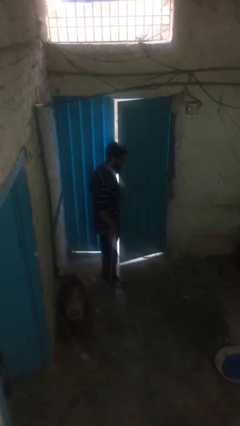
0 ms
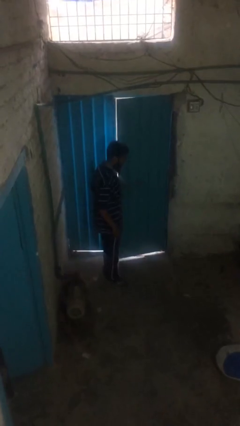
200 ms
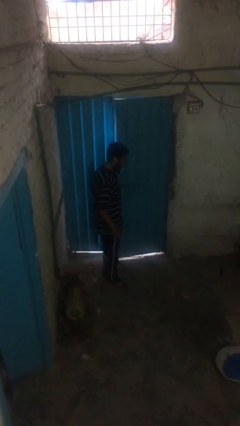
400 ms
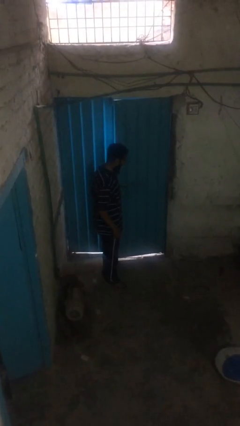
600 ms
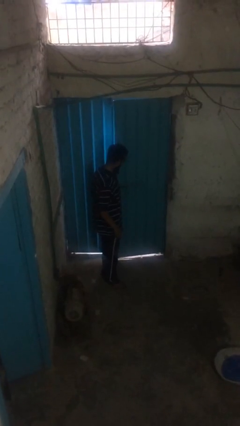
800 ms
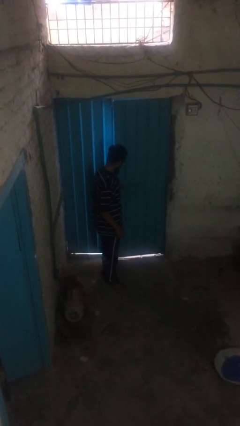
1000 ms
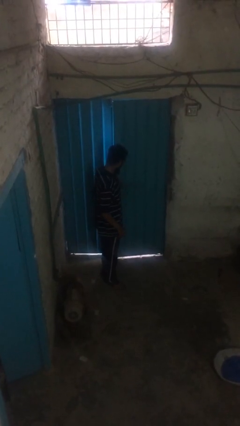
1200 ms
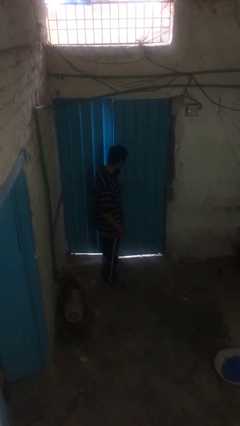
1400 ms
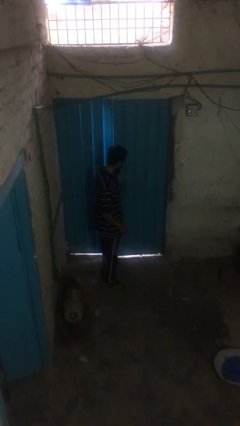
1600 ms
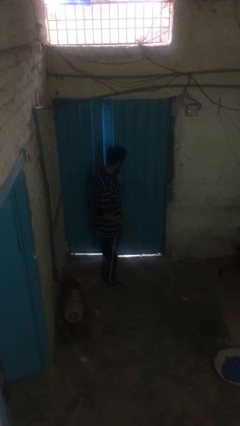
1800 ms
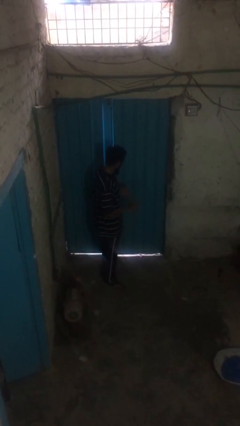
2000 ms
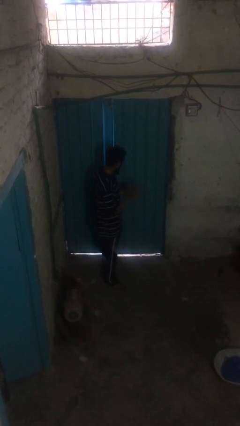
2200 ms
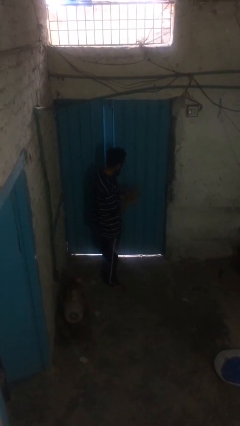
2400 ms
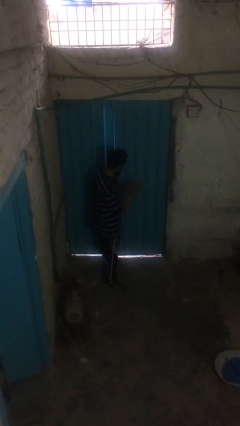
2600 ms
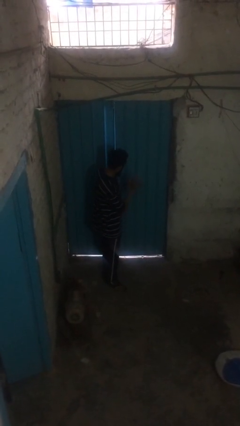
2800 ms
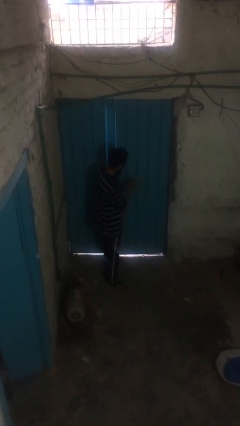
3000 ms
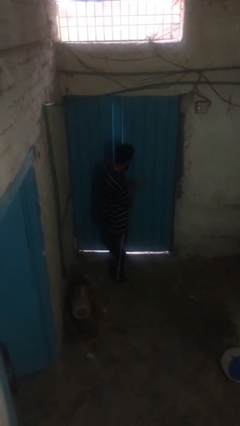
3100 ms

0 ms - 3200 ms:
person closes facility door

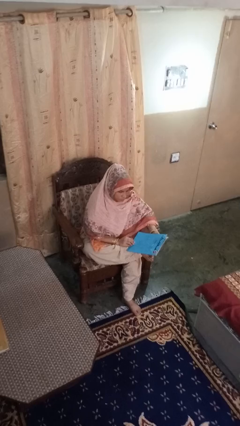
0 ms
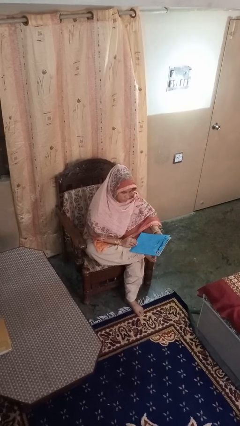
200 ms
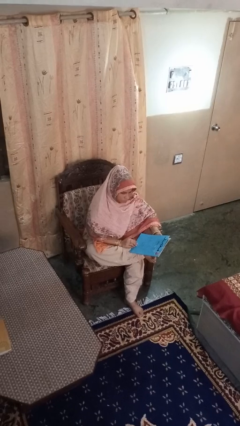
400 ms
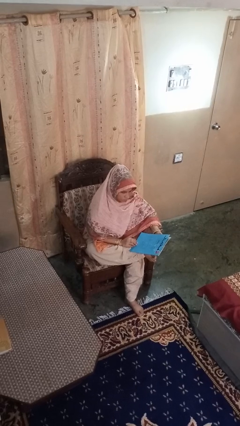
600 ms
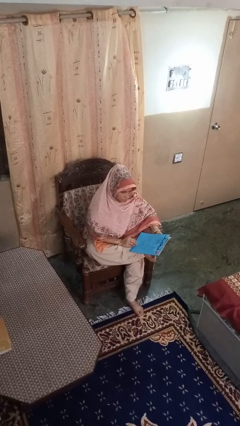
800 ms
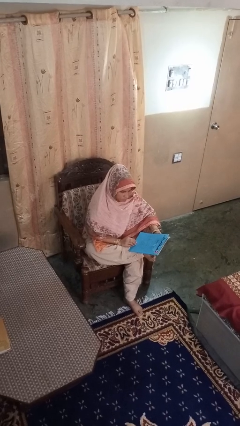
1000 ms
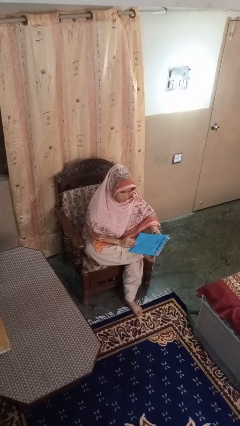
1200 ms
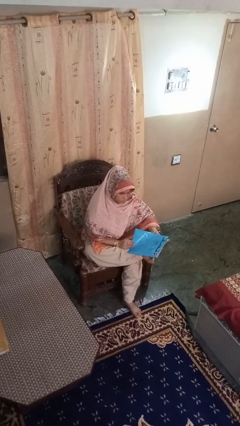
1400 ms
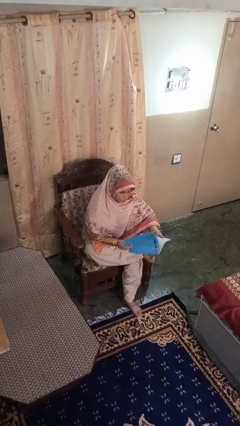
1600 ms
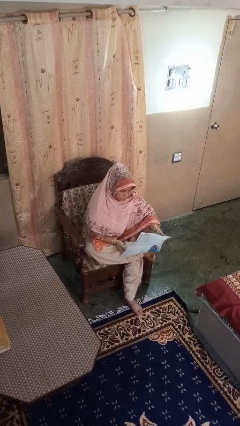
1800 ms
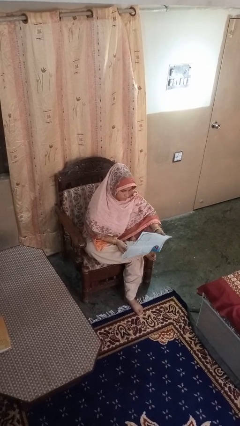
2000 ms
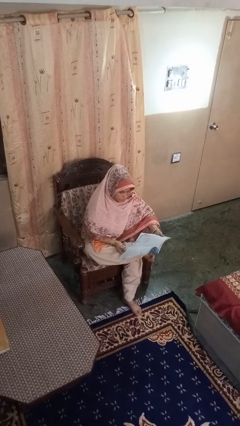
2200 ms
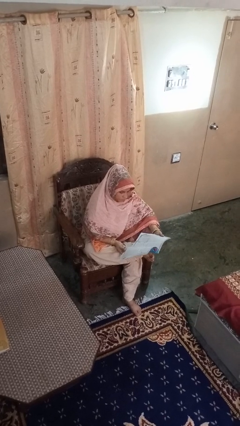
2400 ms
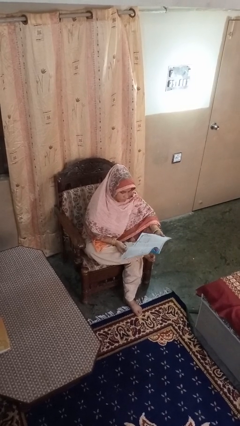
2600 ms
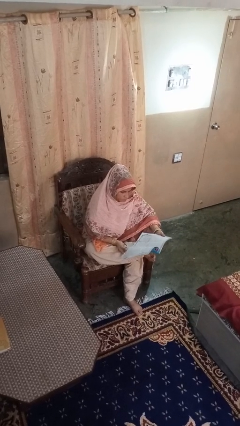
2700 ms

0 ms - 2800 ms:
person reads magazine

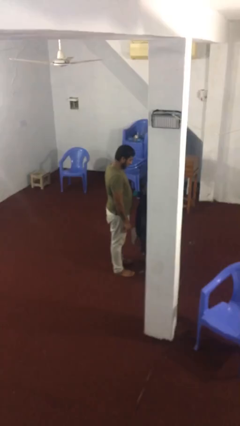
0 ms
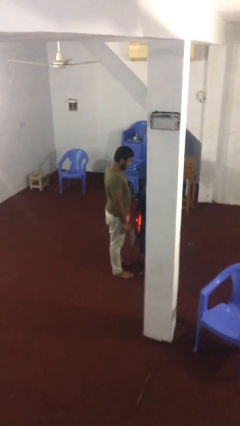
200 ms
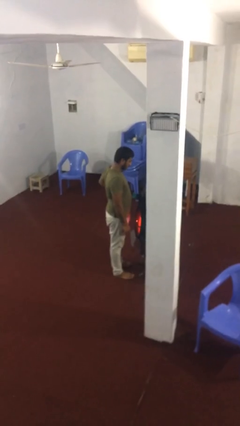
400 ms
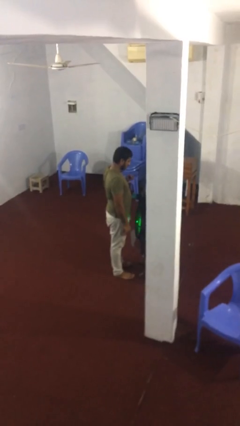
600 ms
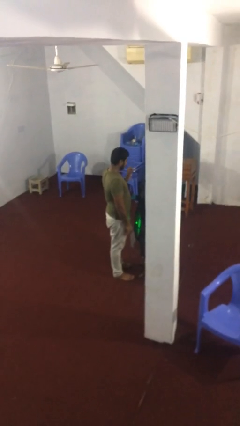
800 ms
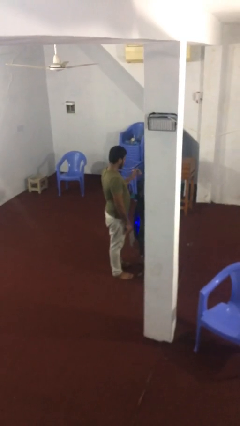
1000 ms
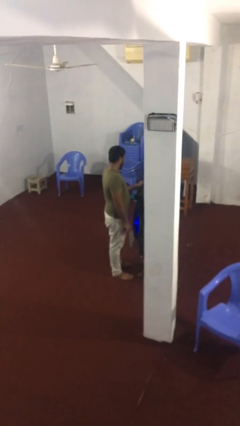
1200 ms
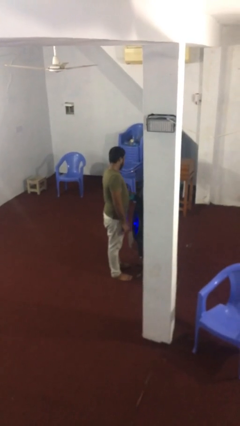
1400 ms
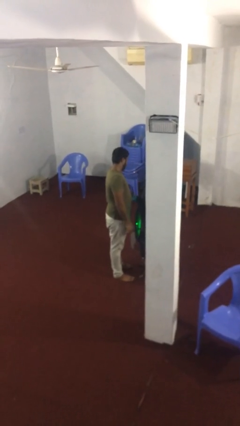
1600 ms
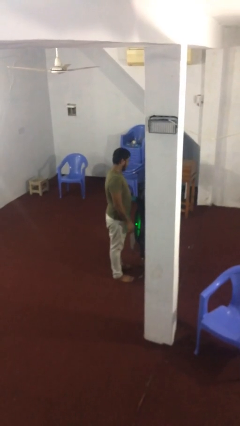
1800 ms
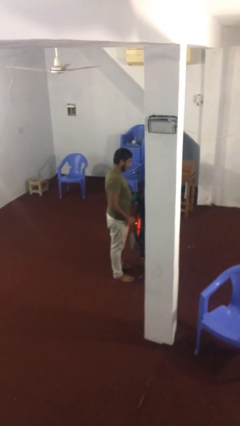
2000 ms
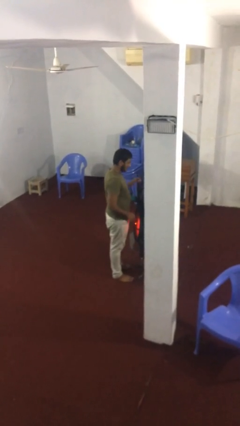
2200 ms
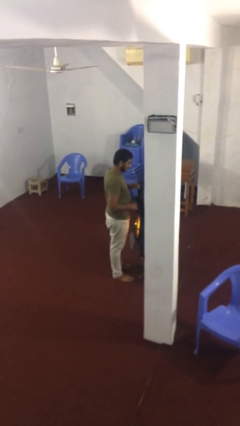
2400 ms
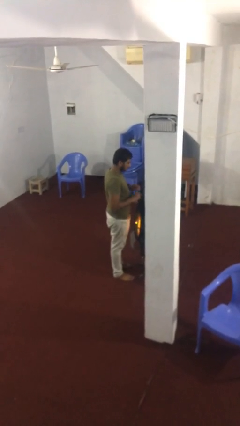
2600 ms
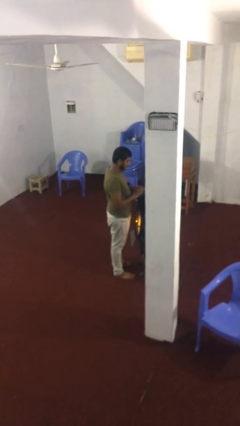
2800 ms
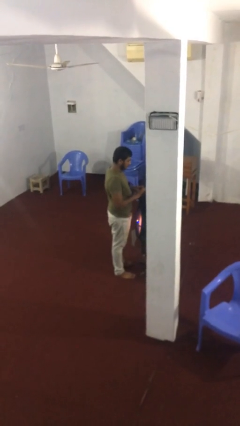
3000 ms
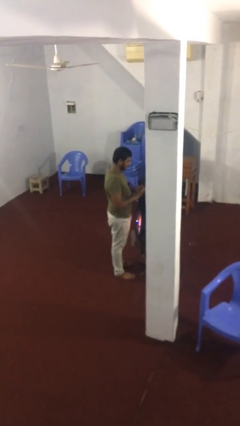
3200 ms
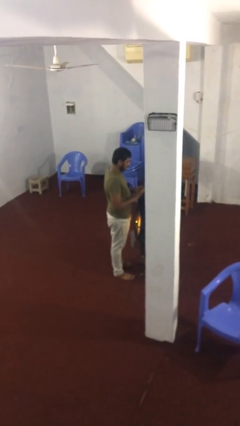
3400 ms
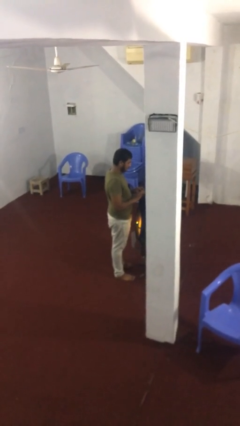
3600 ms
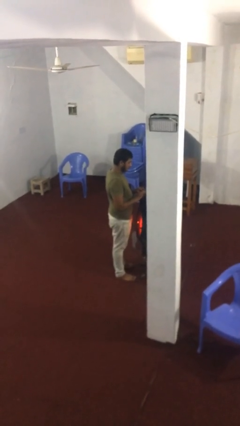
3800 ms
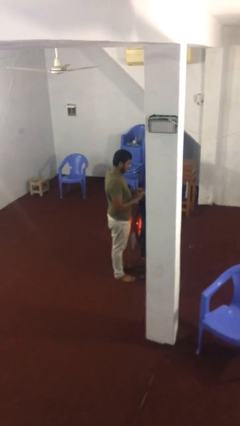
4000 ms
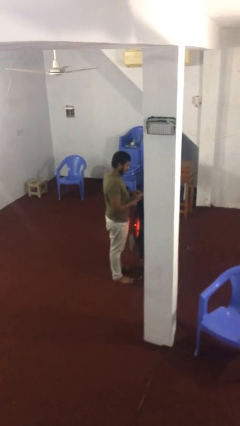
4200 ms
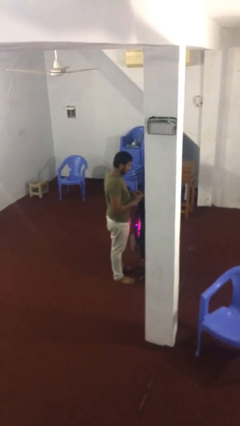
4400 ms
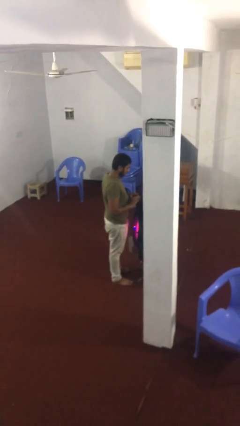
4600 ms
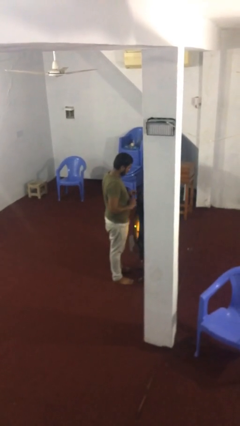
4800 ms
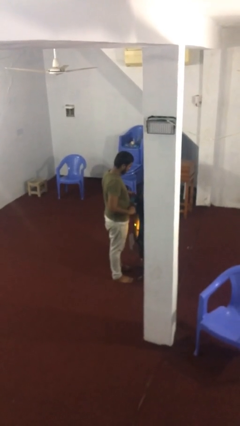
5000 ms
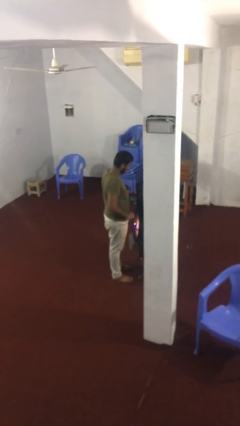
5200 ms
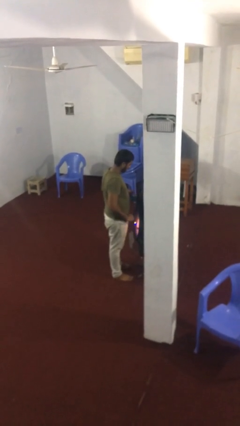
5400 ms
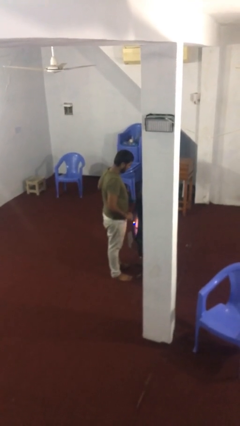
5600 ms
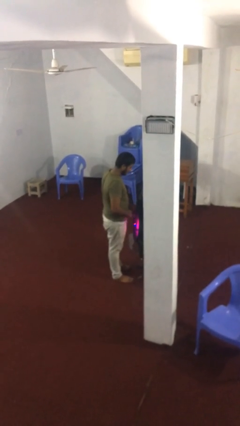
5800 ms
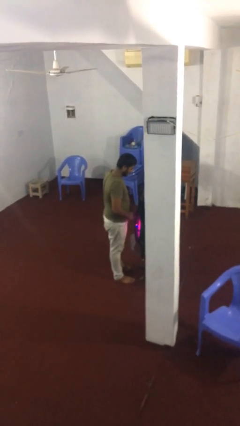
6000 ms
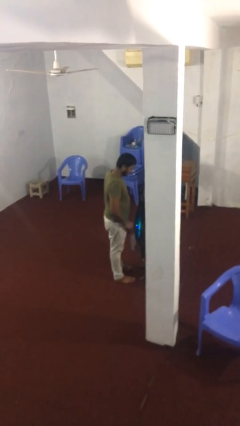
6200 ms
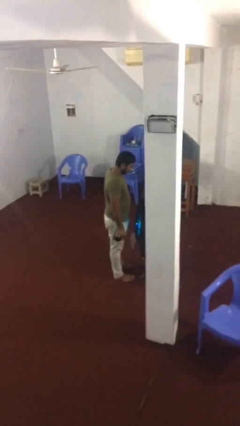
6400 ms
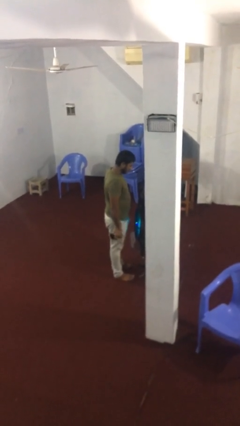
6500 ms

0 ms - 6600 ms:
person purchases from machine

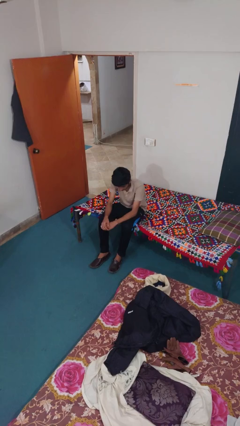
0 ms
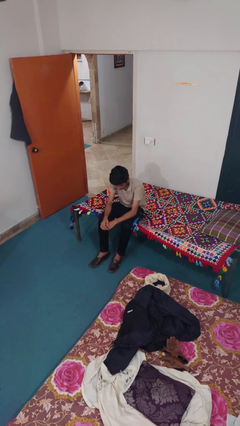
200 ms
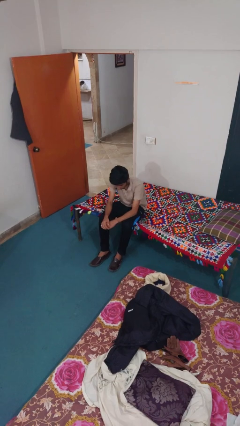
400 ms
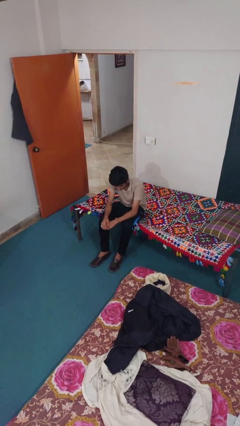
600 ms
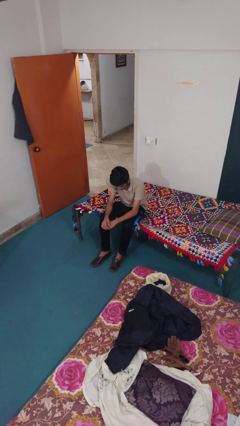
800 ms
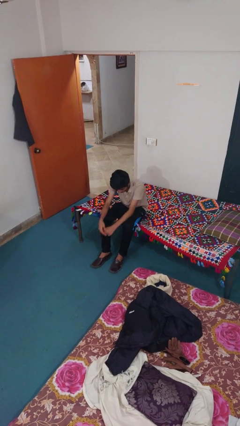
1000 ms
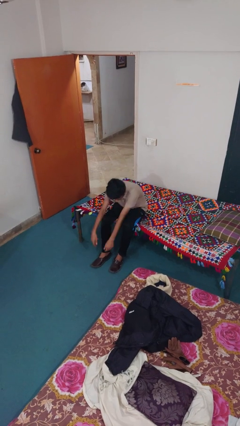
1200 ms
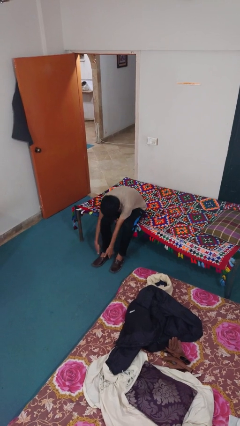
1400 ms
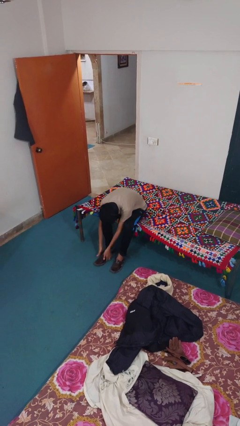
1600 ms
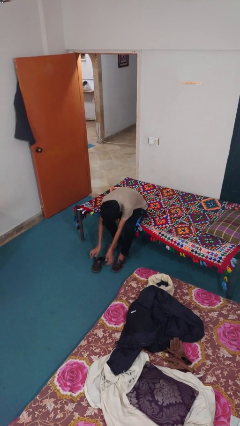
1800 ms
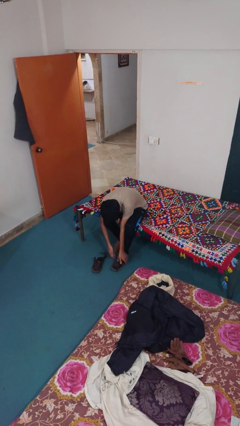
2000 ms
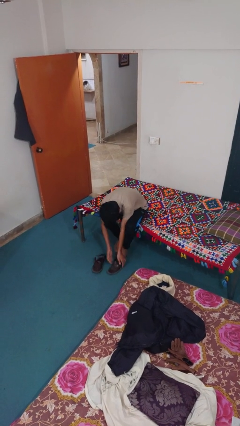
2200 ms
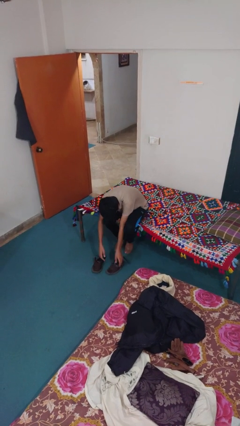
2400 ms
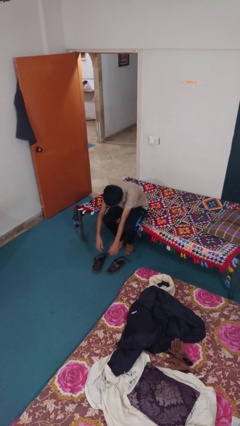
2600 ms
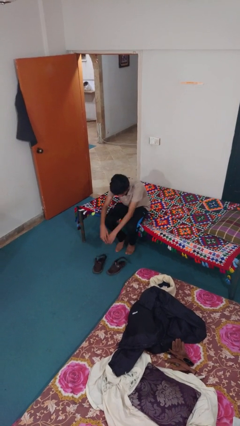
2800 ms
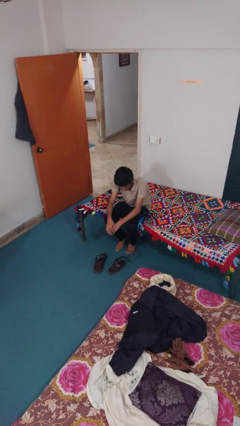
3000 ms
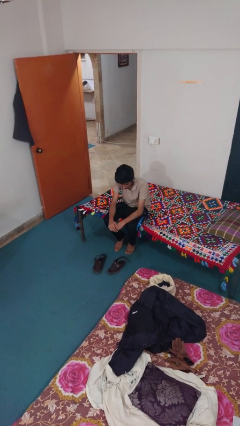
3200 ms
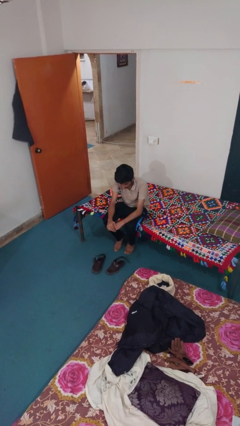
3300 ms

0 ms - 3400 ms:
person takes off shoes

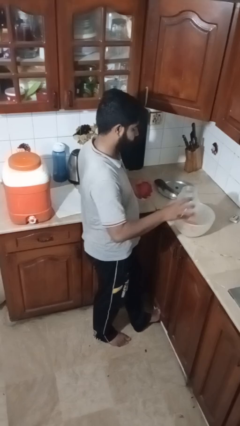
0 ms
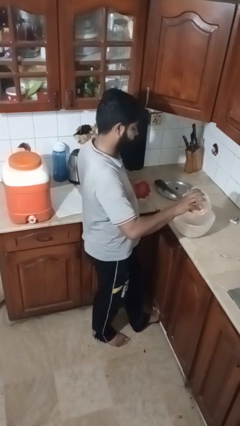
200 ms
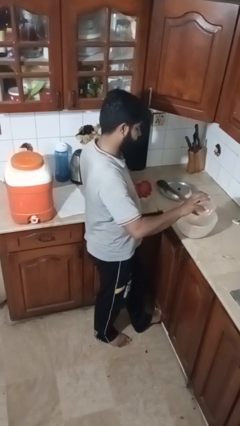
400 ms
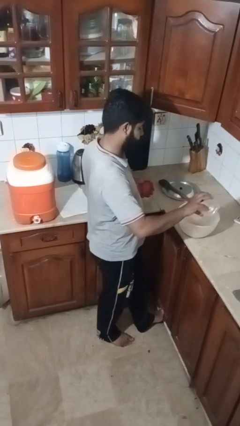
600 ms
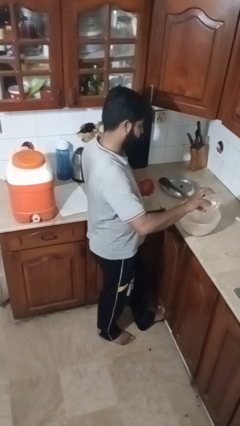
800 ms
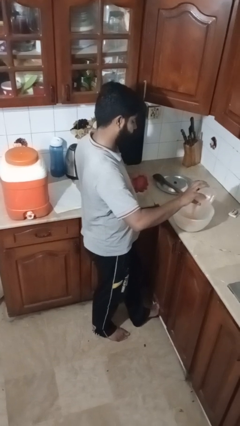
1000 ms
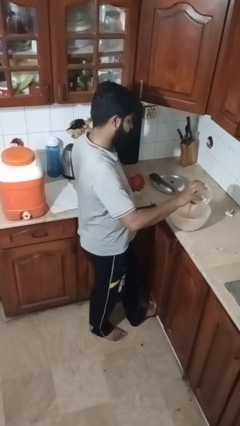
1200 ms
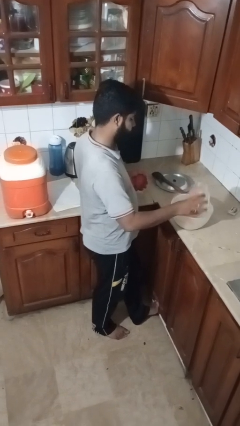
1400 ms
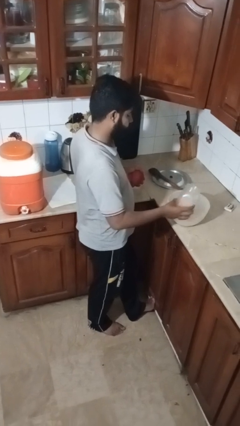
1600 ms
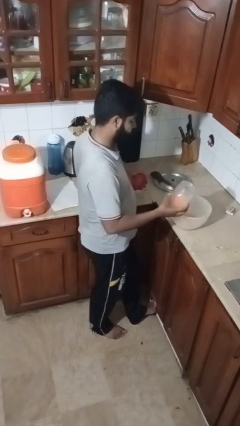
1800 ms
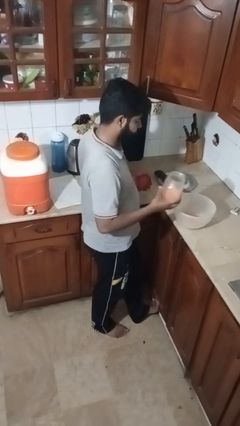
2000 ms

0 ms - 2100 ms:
person pours into bowl
